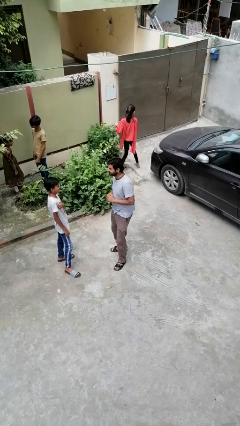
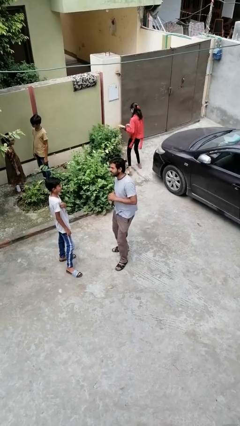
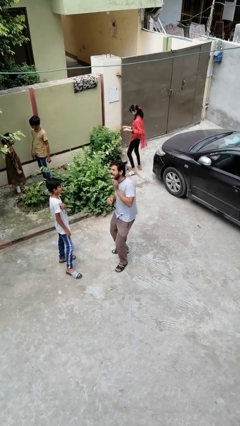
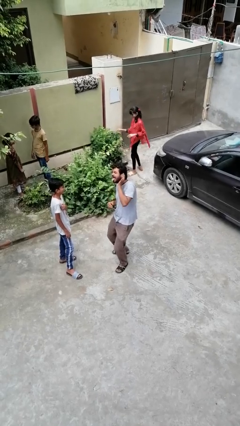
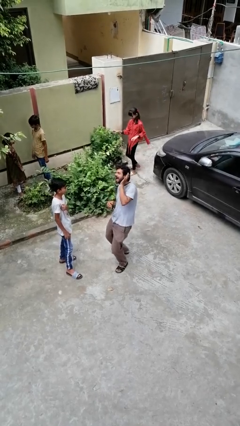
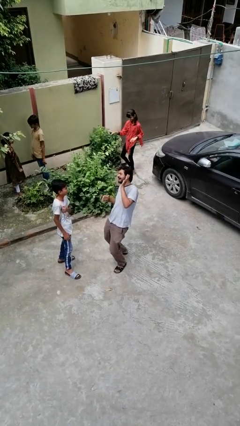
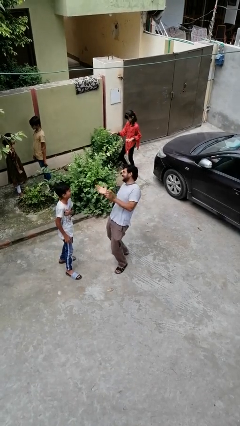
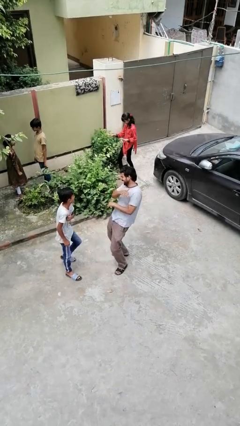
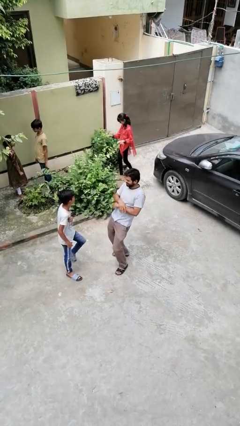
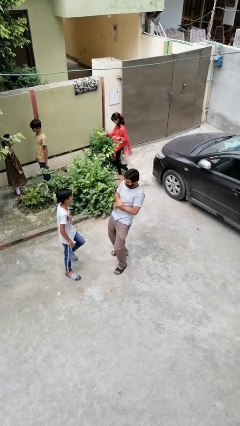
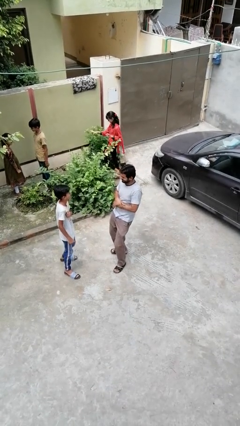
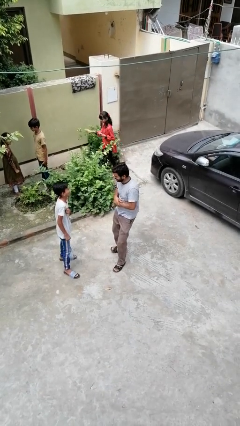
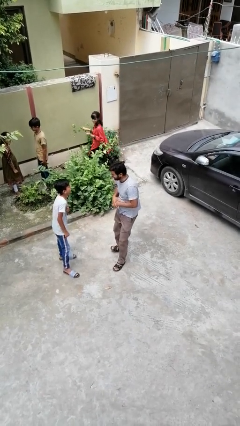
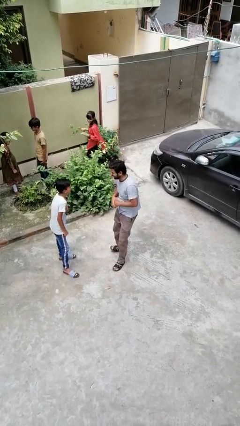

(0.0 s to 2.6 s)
person laughs with person

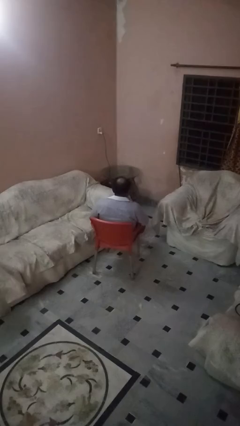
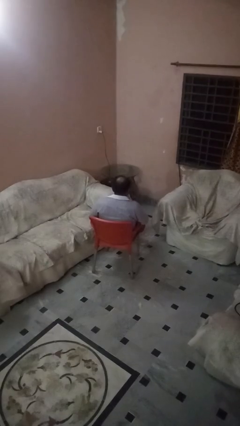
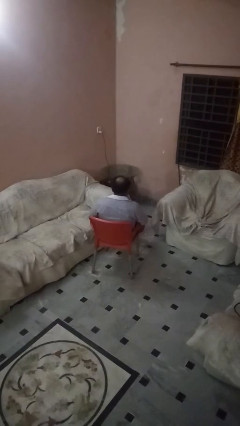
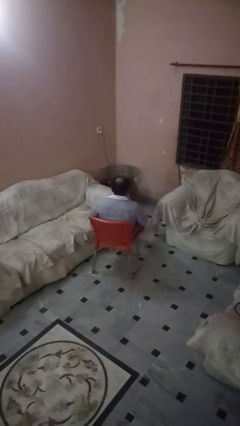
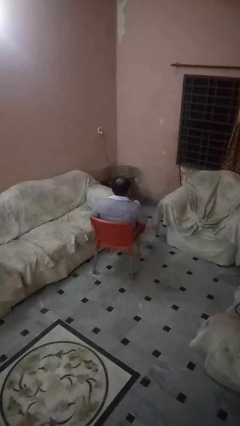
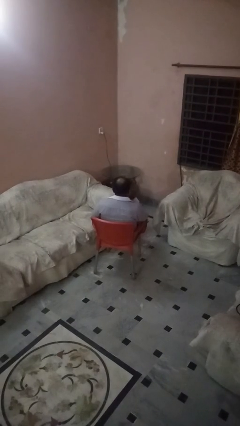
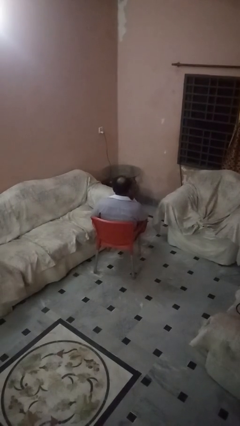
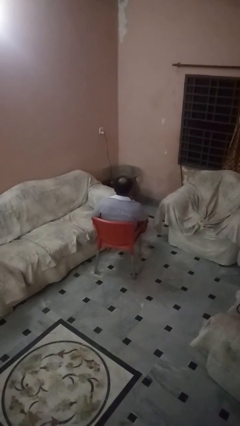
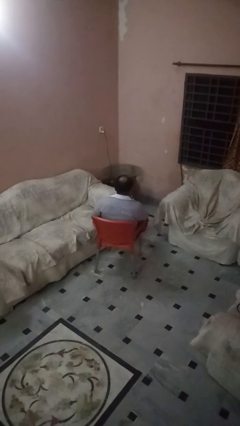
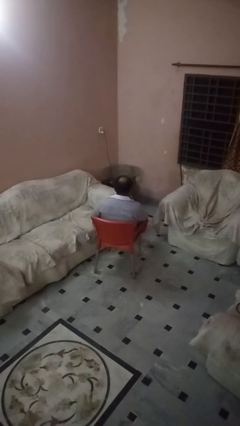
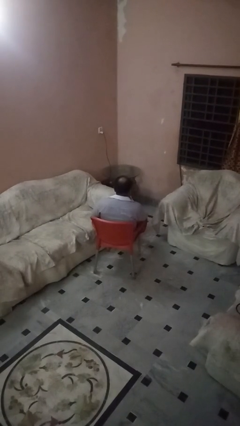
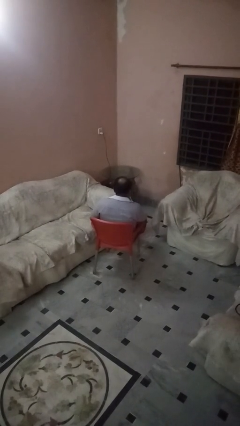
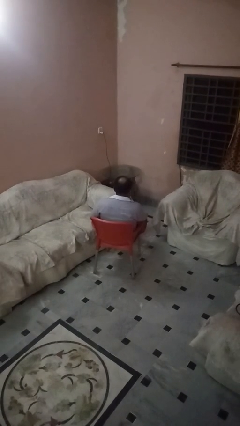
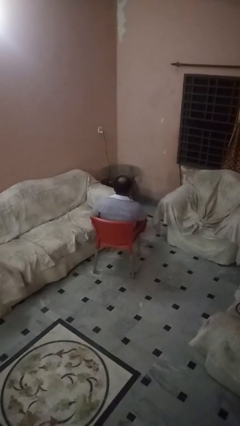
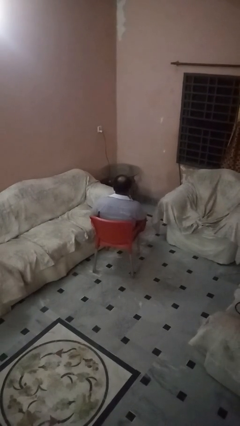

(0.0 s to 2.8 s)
person strokes chin

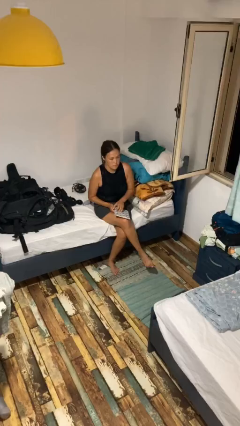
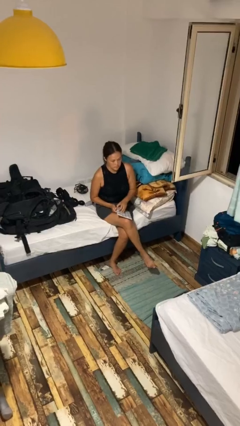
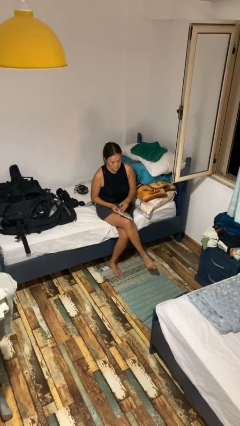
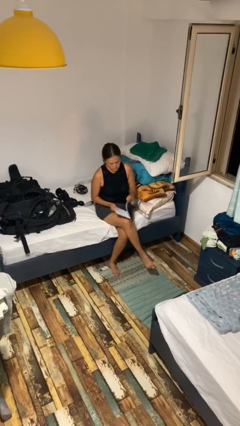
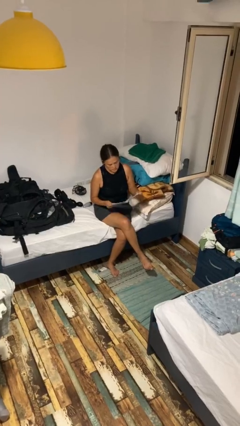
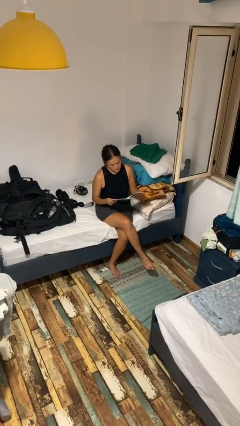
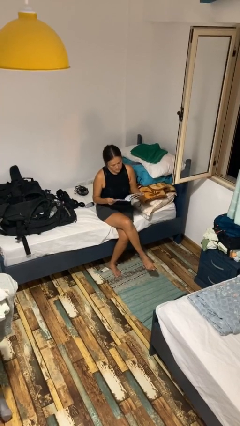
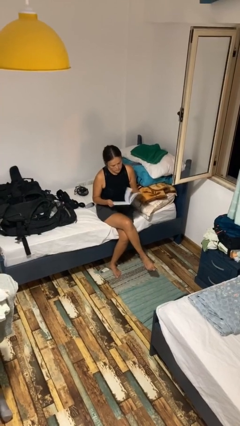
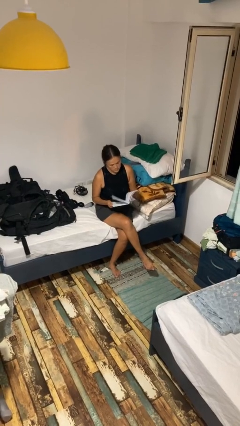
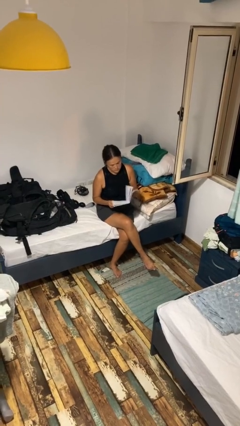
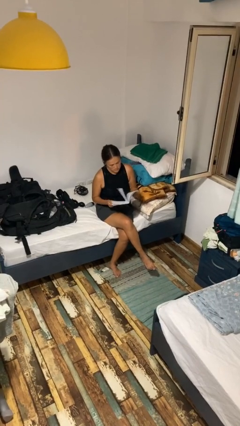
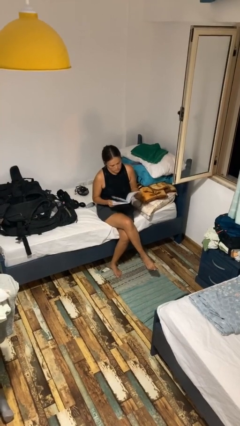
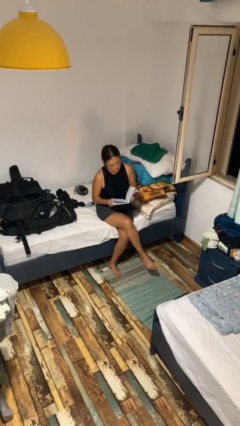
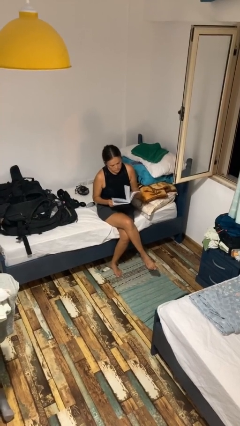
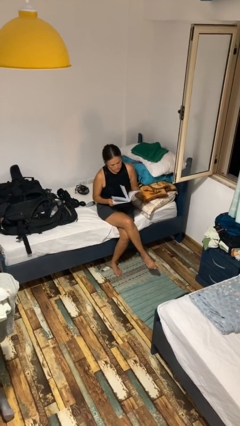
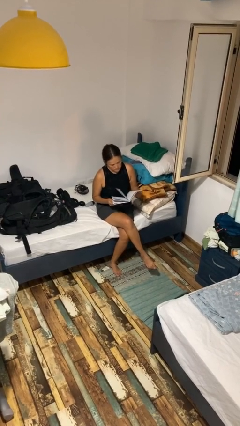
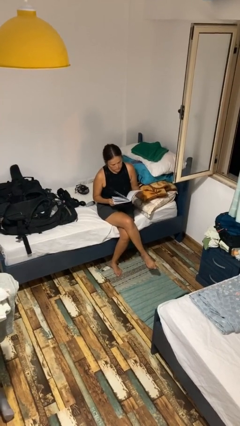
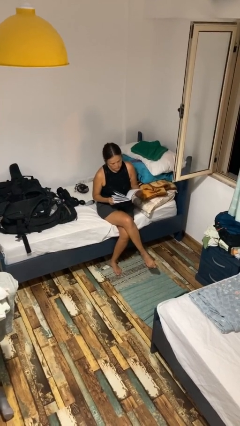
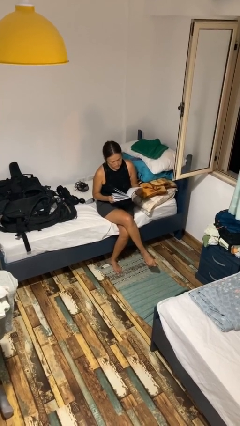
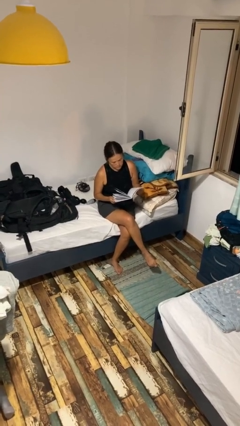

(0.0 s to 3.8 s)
person reads magazine

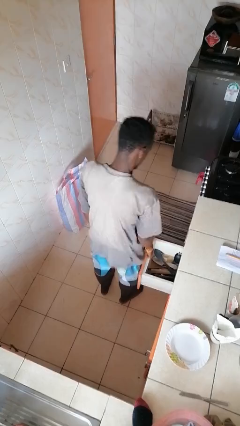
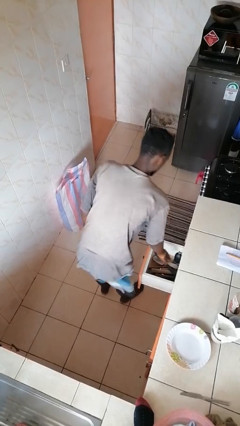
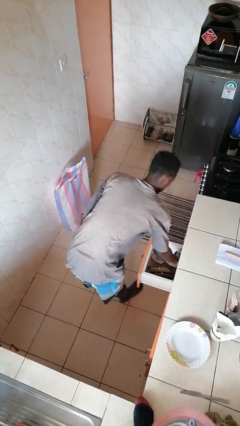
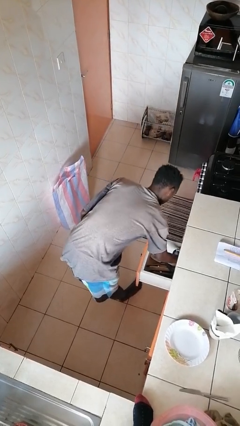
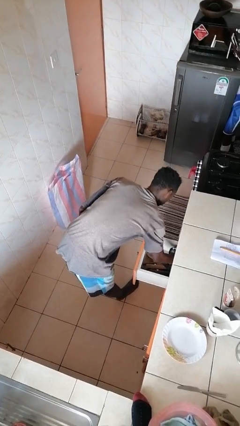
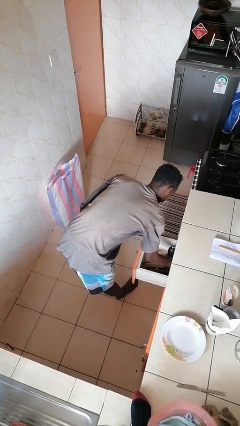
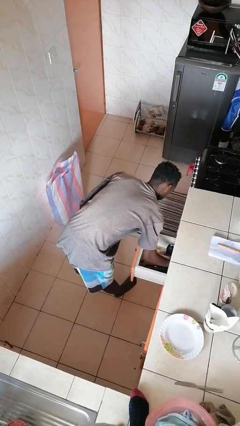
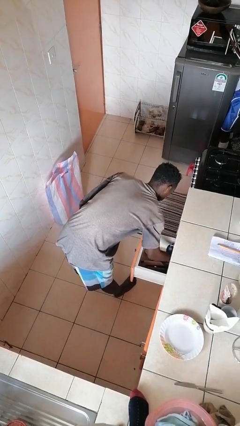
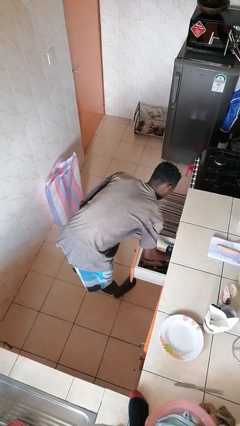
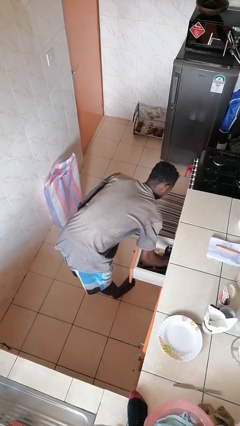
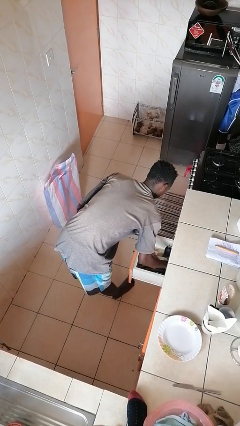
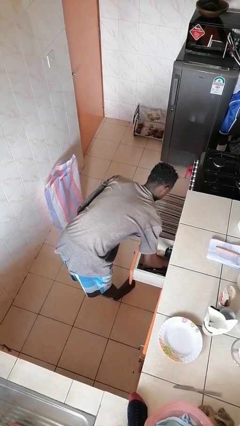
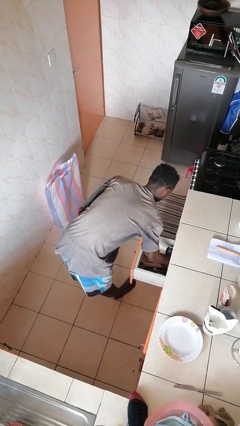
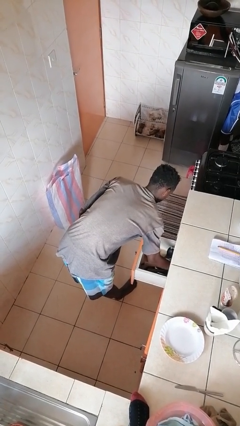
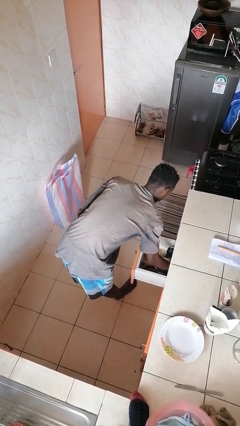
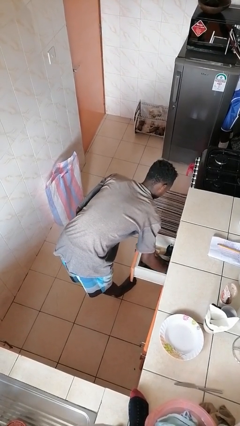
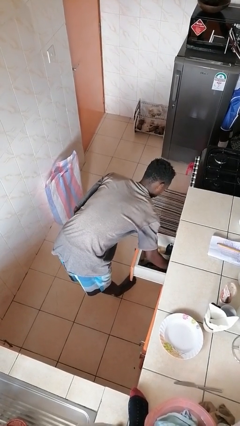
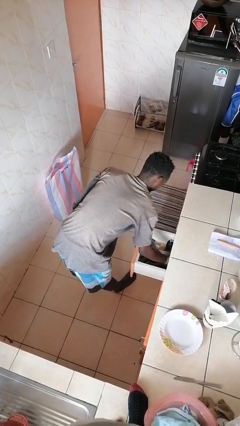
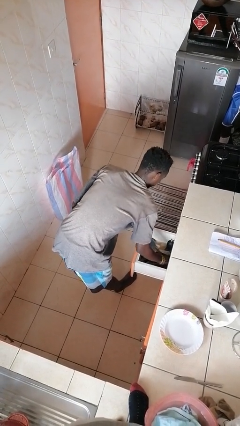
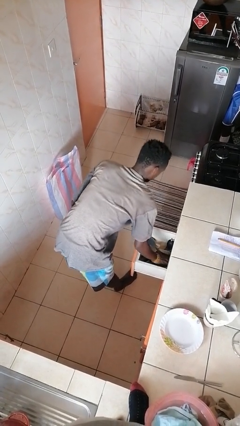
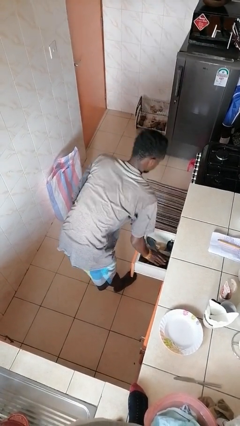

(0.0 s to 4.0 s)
person searches in kitchen drawer

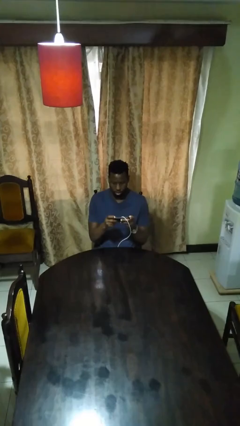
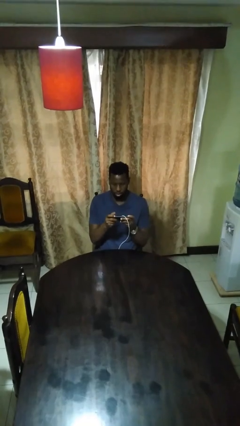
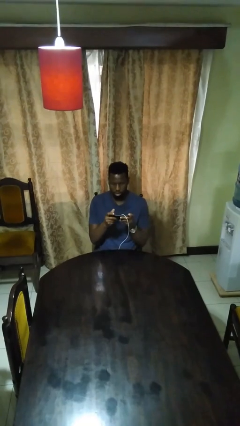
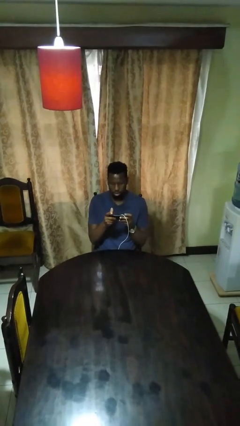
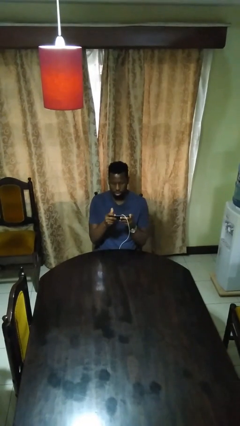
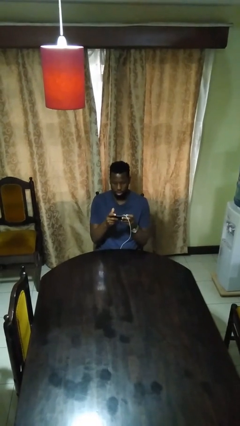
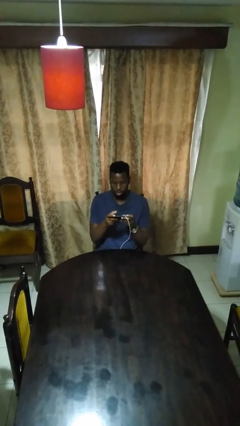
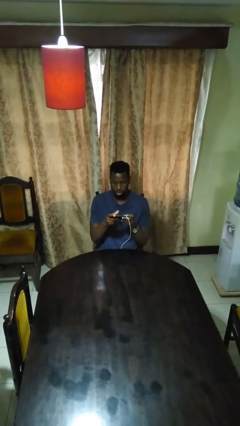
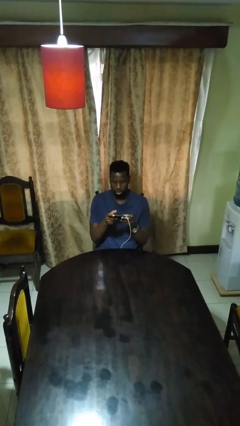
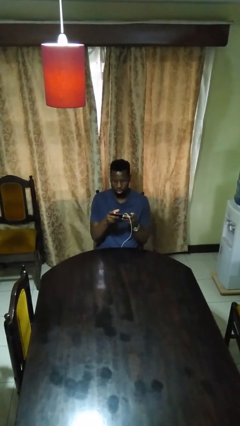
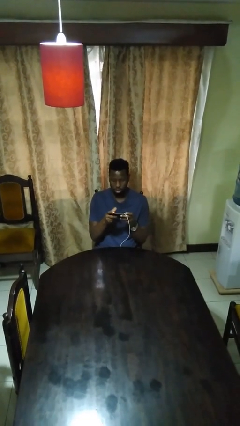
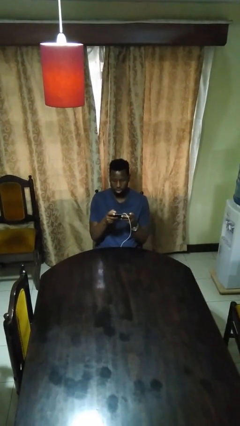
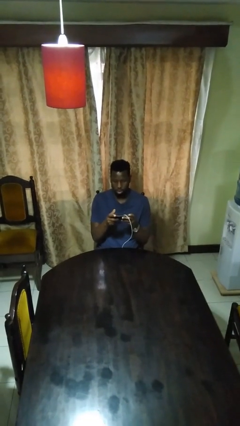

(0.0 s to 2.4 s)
person interacts with handheld game

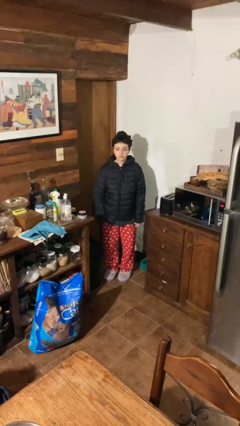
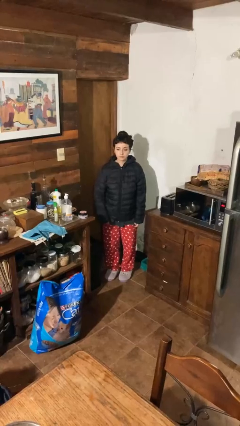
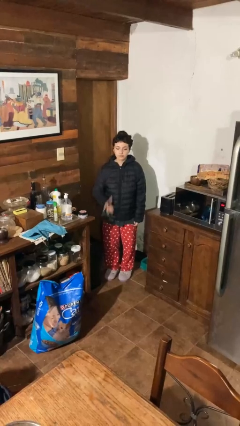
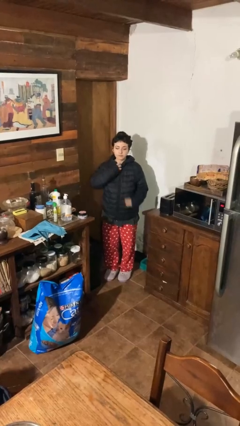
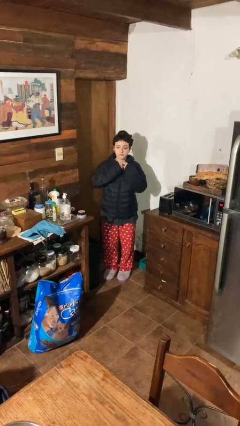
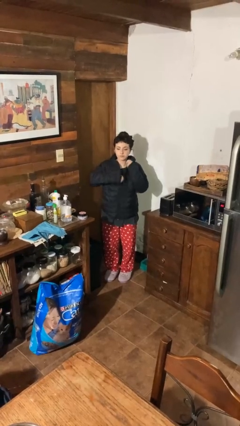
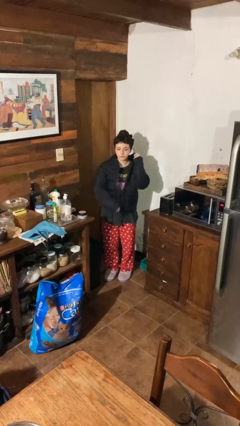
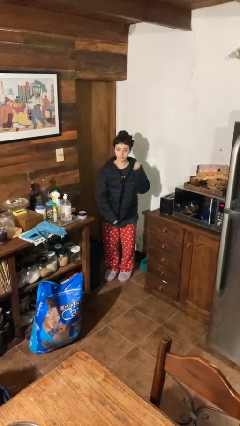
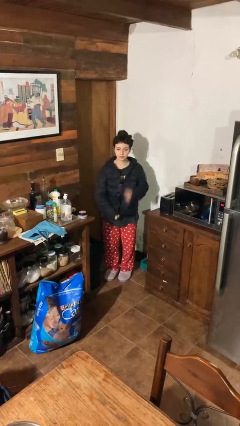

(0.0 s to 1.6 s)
person unzips jacket

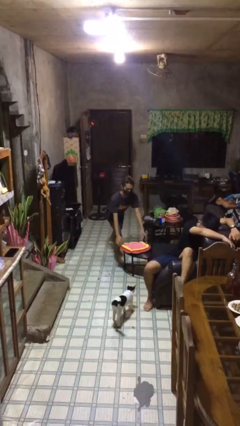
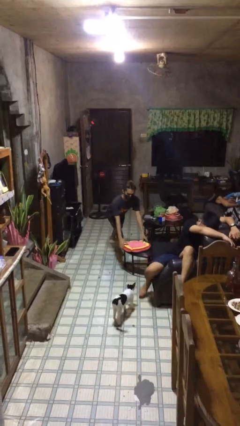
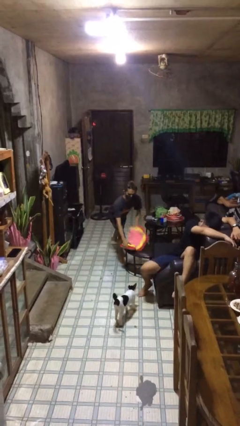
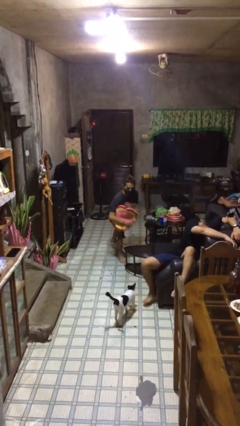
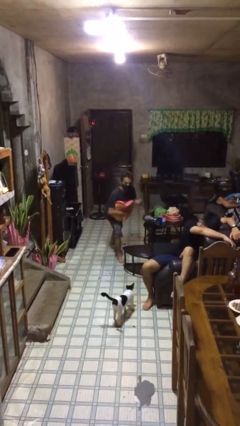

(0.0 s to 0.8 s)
person steals object from person
